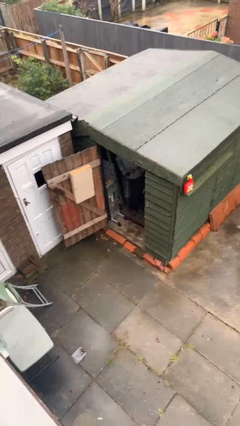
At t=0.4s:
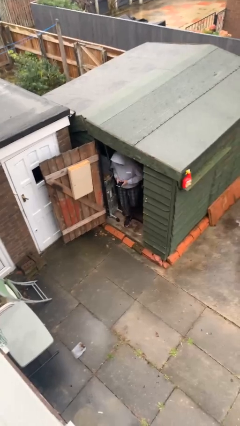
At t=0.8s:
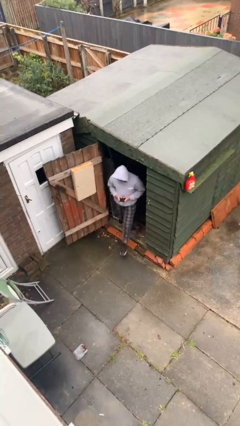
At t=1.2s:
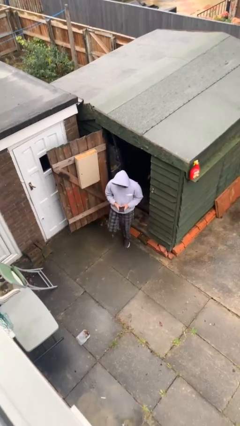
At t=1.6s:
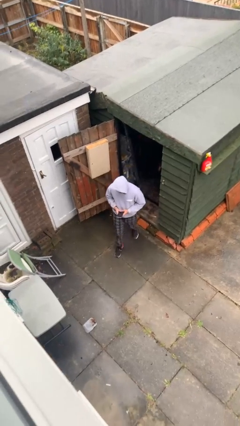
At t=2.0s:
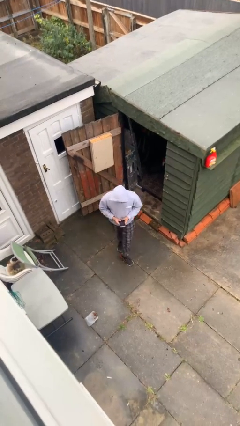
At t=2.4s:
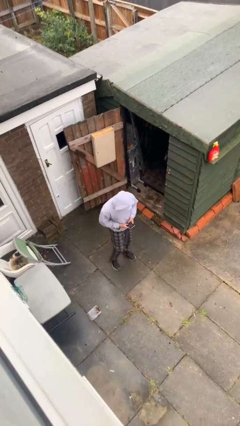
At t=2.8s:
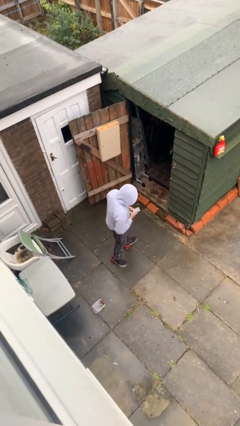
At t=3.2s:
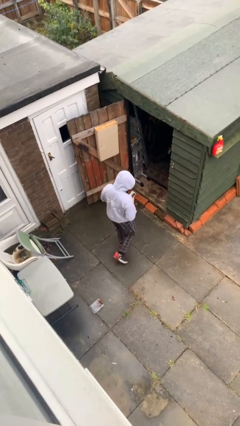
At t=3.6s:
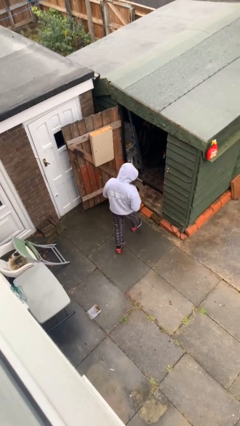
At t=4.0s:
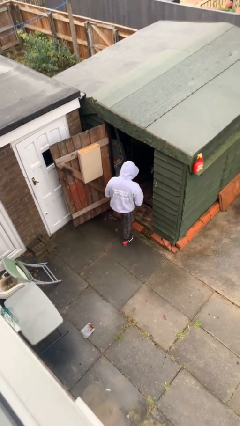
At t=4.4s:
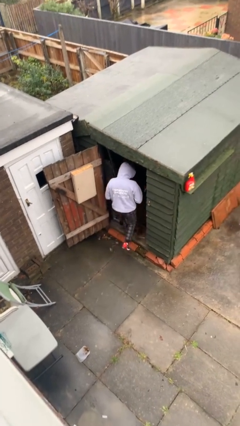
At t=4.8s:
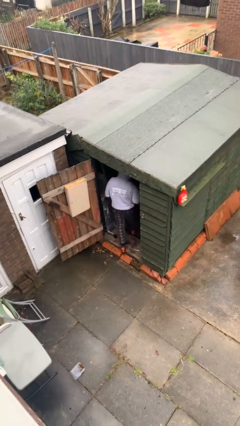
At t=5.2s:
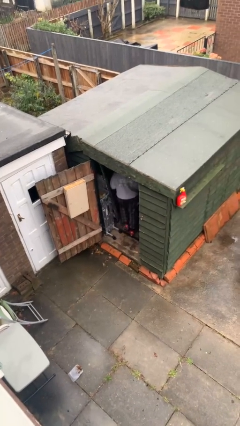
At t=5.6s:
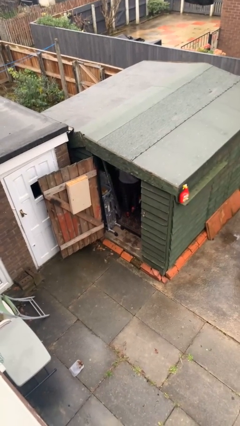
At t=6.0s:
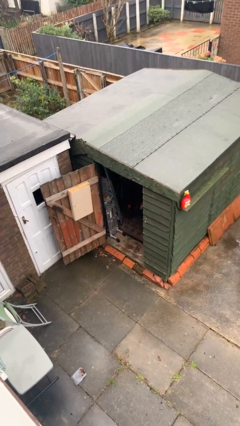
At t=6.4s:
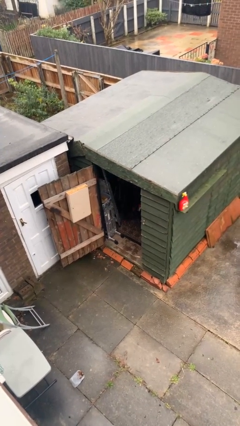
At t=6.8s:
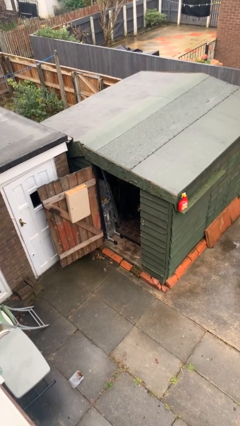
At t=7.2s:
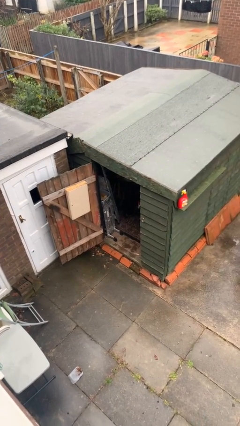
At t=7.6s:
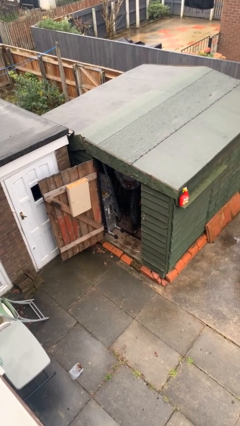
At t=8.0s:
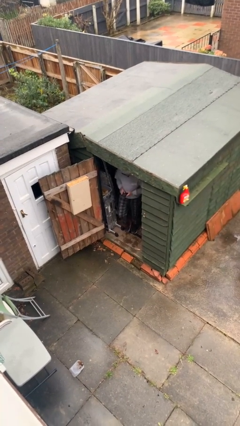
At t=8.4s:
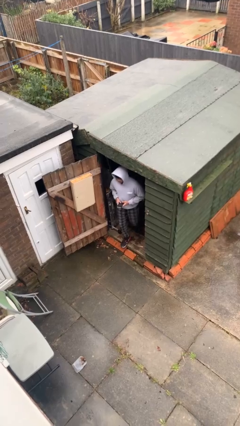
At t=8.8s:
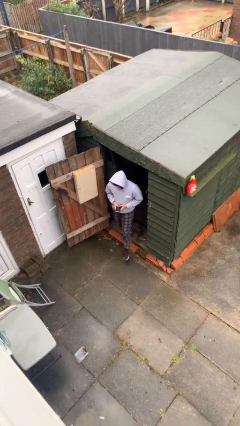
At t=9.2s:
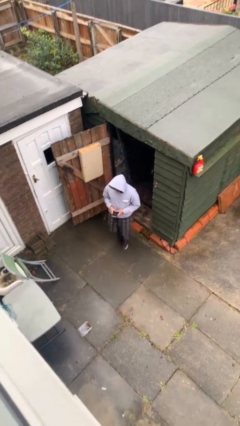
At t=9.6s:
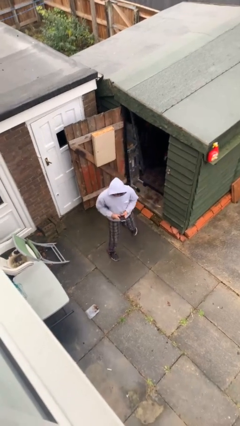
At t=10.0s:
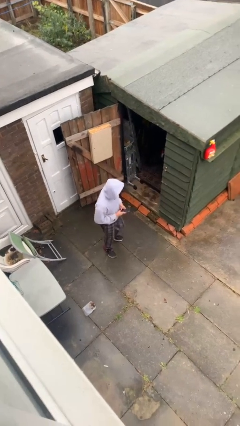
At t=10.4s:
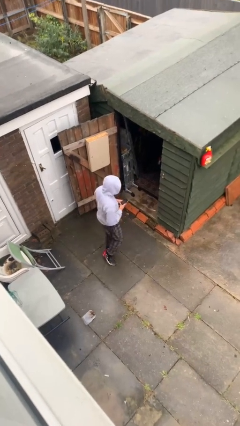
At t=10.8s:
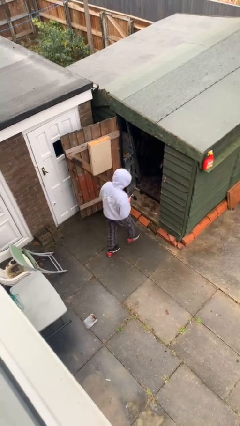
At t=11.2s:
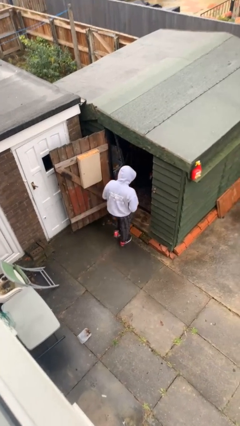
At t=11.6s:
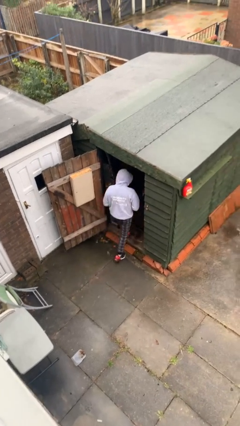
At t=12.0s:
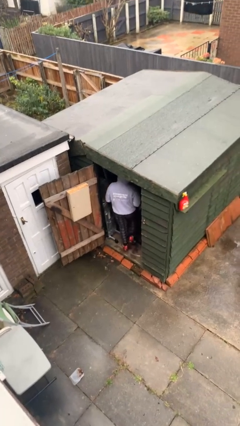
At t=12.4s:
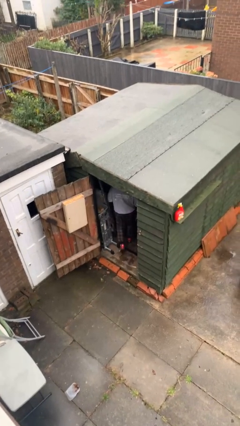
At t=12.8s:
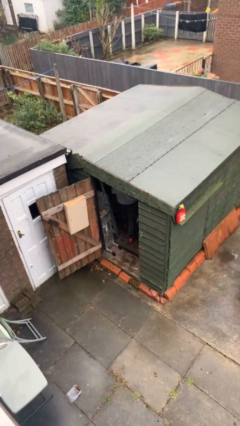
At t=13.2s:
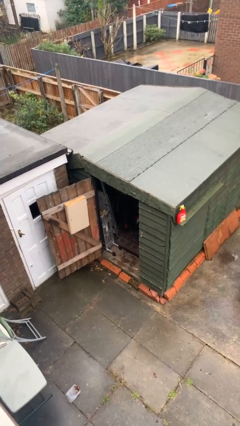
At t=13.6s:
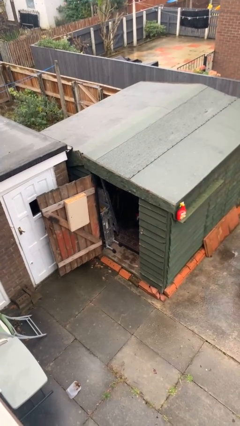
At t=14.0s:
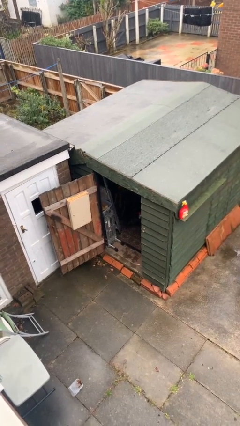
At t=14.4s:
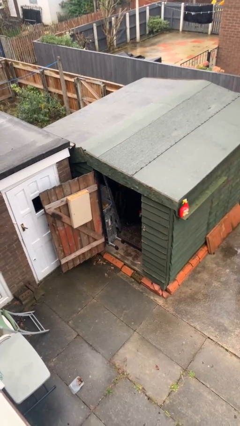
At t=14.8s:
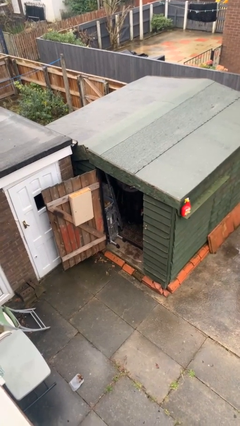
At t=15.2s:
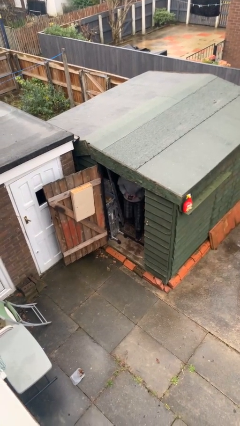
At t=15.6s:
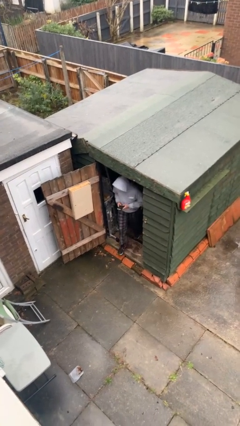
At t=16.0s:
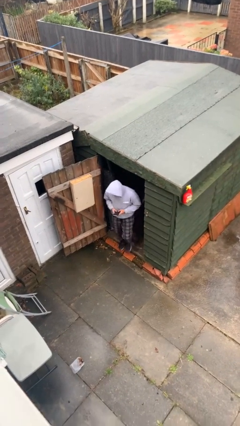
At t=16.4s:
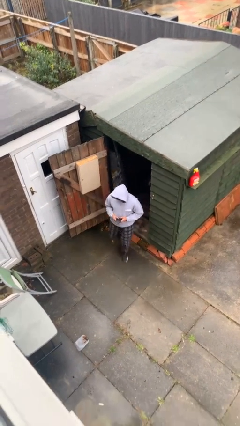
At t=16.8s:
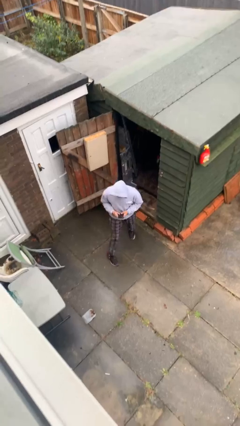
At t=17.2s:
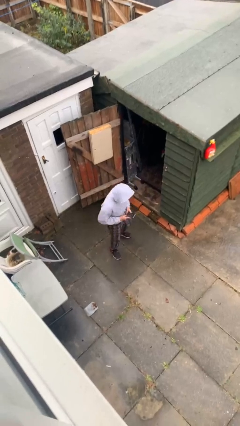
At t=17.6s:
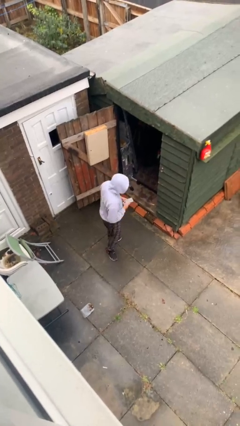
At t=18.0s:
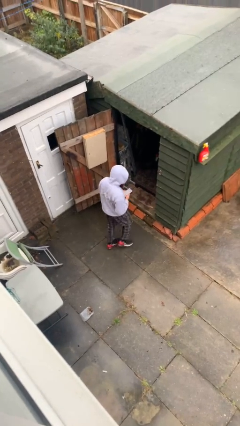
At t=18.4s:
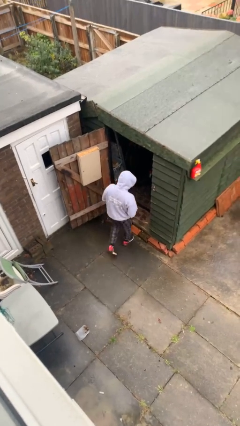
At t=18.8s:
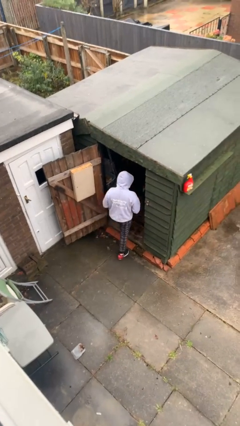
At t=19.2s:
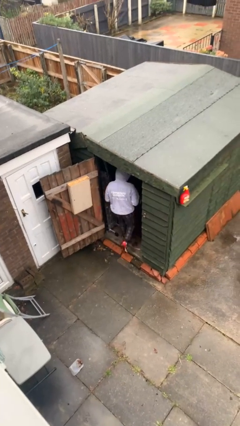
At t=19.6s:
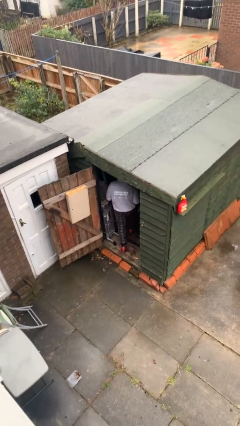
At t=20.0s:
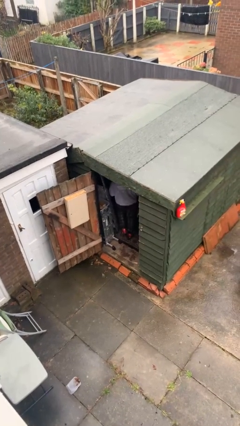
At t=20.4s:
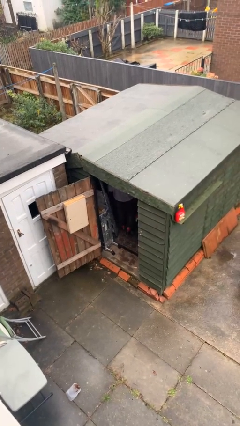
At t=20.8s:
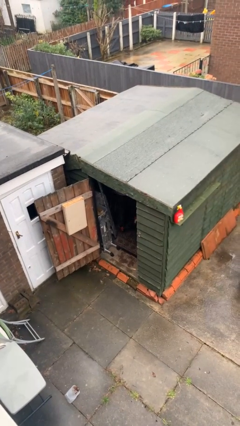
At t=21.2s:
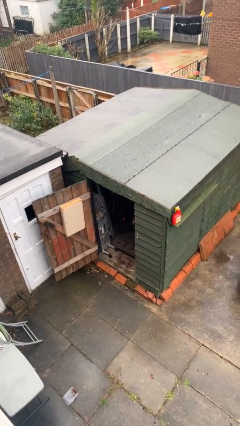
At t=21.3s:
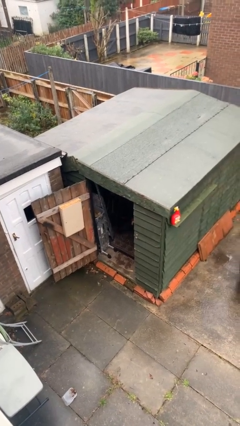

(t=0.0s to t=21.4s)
person texts on phone

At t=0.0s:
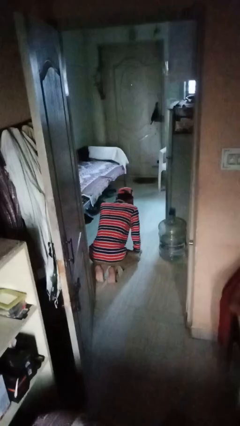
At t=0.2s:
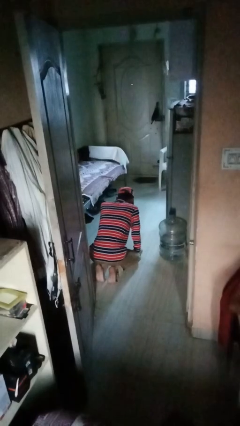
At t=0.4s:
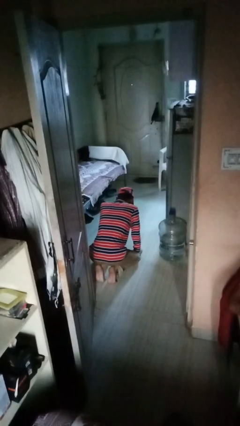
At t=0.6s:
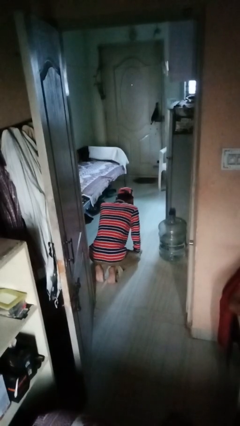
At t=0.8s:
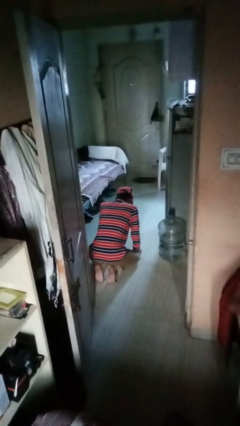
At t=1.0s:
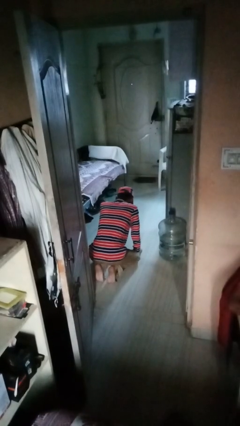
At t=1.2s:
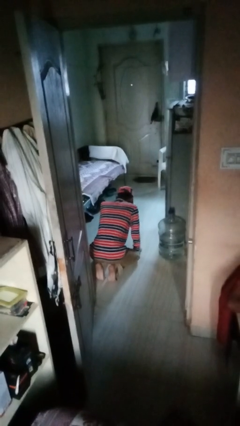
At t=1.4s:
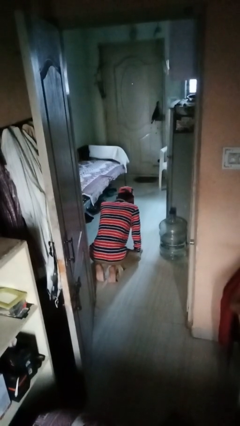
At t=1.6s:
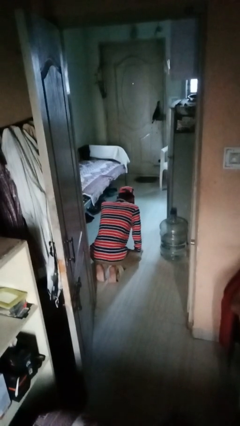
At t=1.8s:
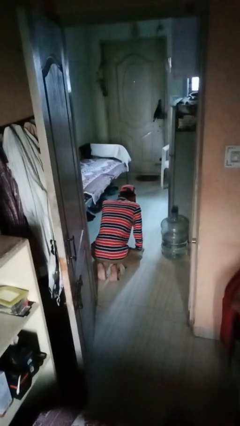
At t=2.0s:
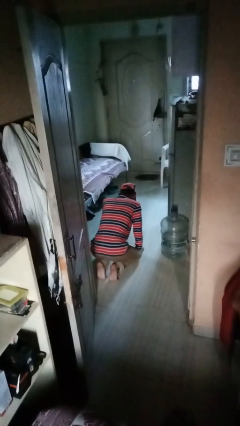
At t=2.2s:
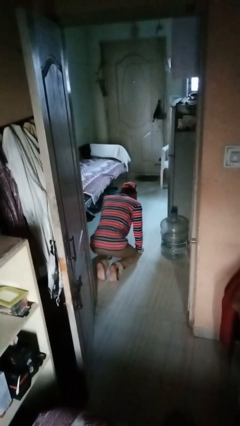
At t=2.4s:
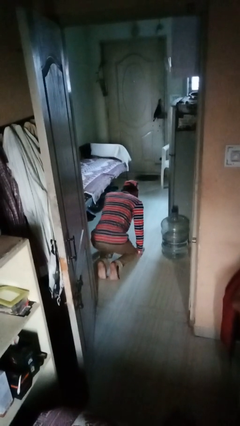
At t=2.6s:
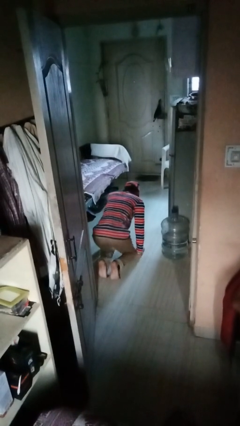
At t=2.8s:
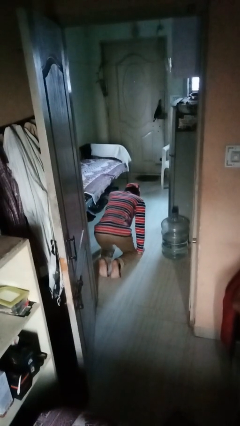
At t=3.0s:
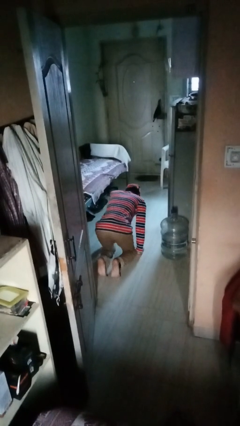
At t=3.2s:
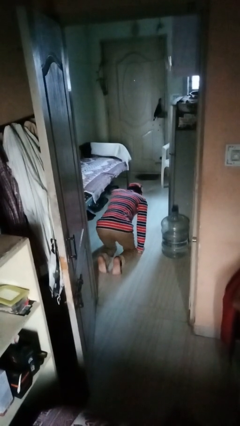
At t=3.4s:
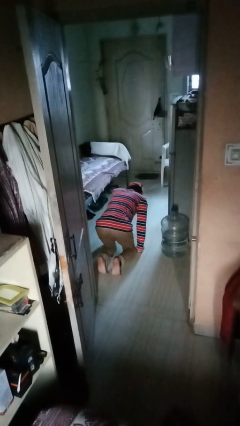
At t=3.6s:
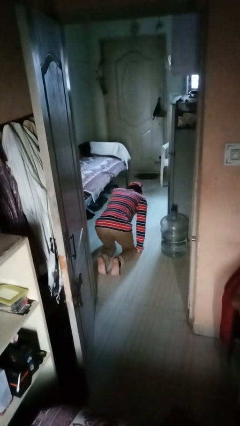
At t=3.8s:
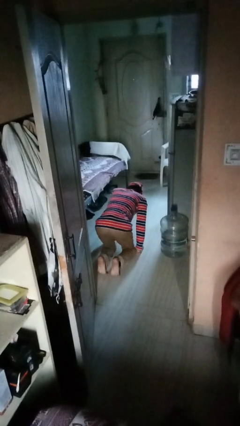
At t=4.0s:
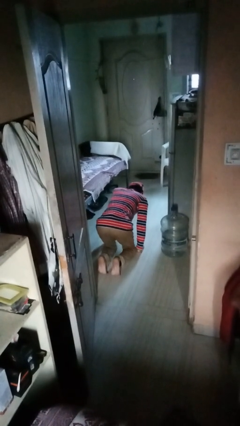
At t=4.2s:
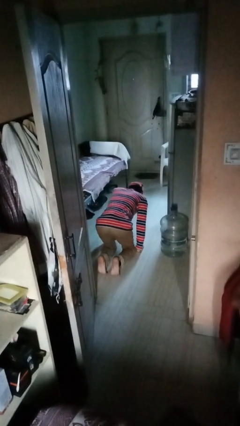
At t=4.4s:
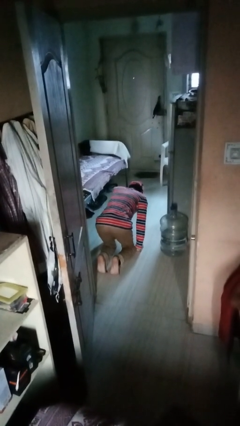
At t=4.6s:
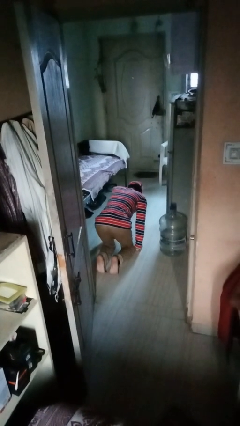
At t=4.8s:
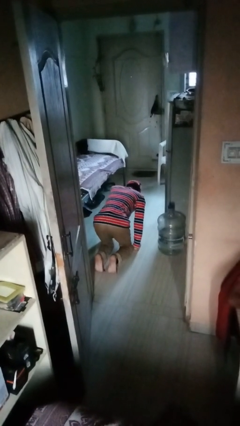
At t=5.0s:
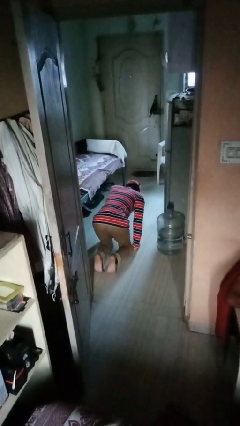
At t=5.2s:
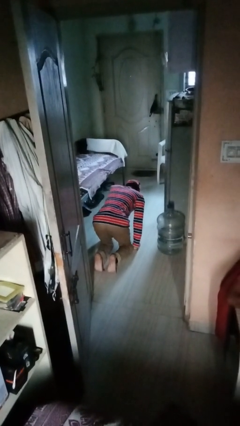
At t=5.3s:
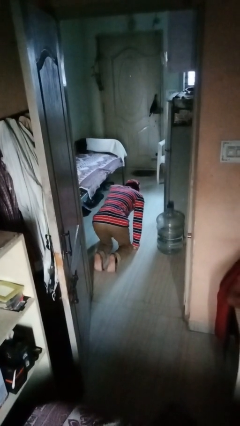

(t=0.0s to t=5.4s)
person crawls

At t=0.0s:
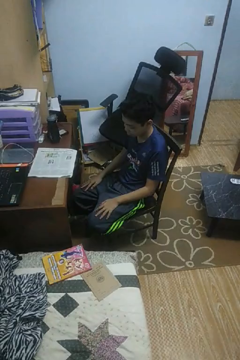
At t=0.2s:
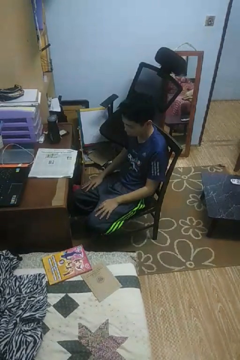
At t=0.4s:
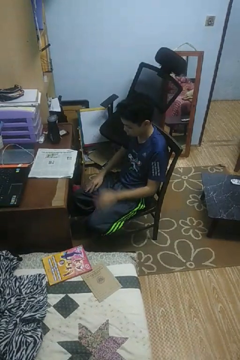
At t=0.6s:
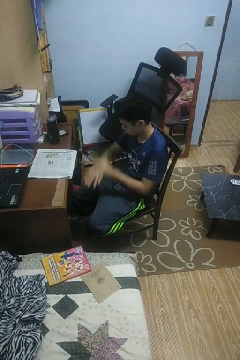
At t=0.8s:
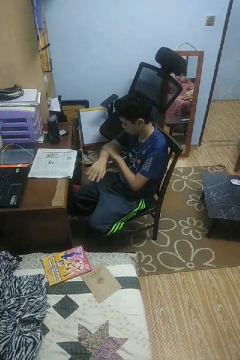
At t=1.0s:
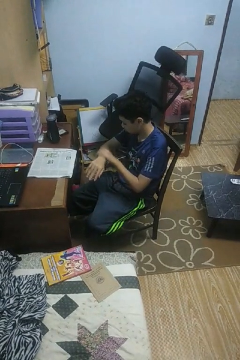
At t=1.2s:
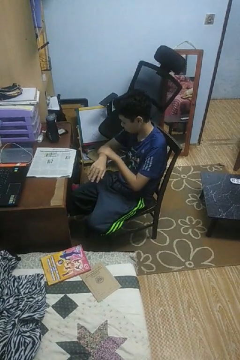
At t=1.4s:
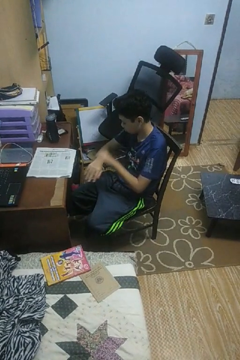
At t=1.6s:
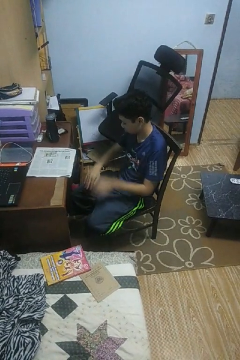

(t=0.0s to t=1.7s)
person looks at hands in lap

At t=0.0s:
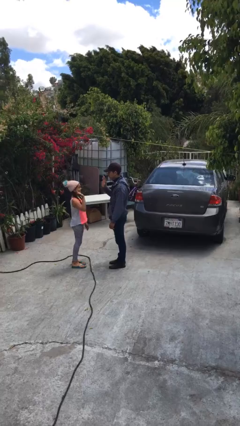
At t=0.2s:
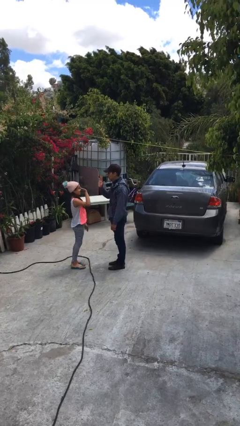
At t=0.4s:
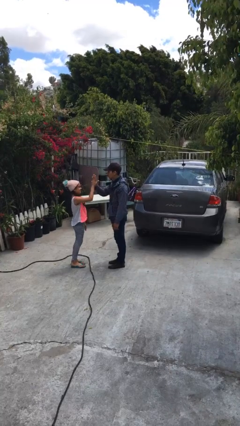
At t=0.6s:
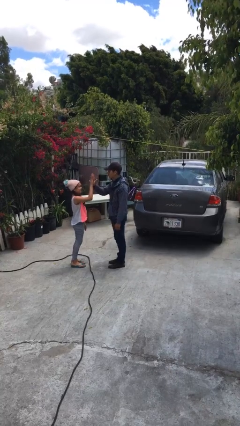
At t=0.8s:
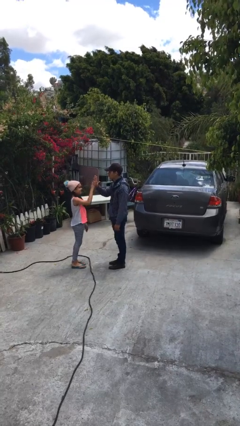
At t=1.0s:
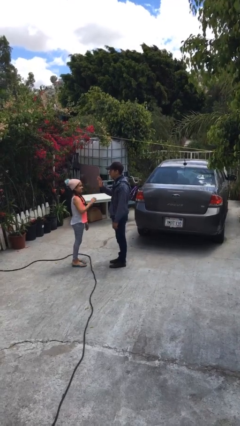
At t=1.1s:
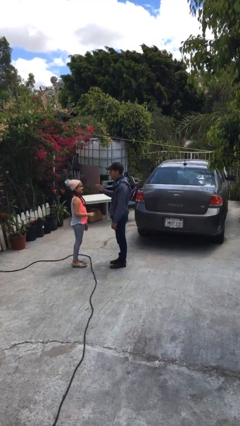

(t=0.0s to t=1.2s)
person highfives hand
